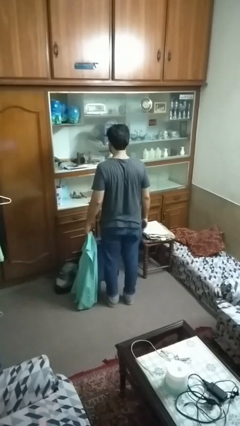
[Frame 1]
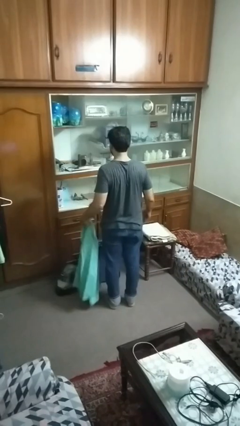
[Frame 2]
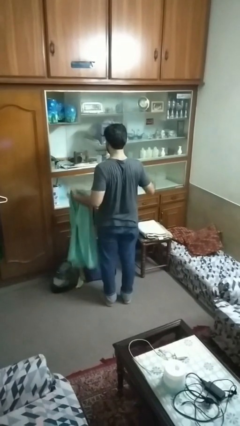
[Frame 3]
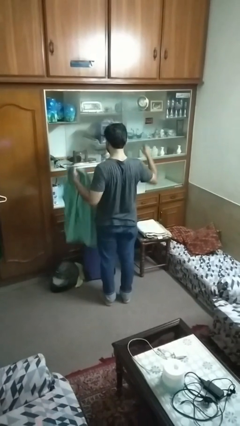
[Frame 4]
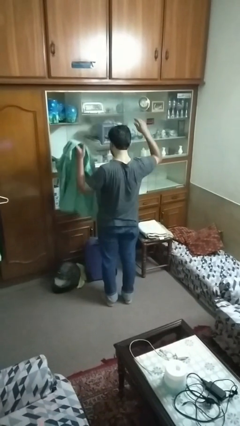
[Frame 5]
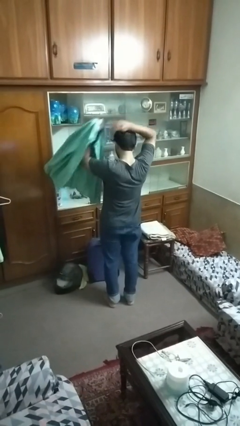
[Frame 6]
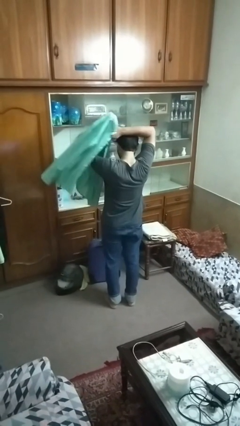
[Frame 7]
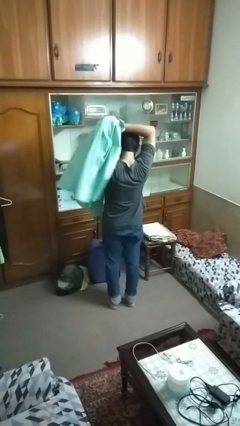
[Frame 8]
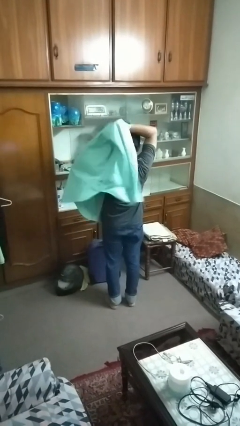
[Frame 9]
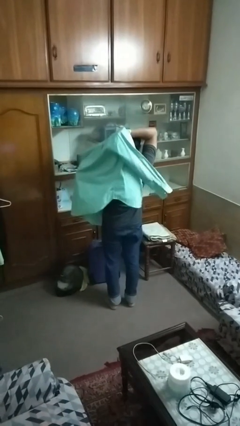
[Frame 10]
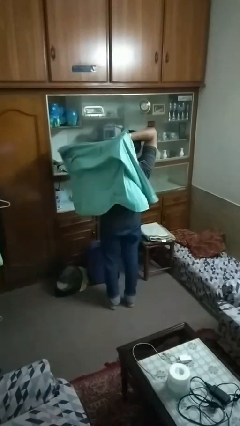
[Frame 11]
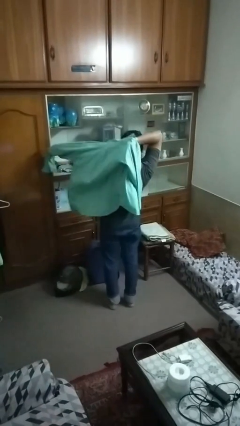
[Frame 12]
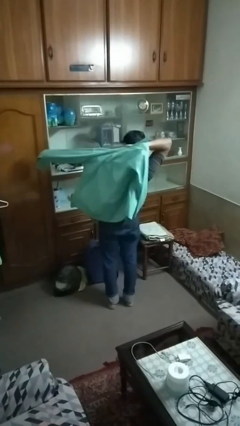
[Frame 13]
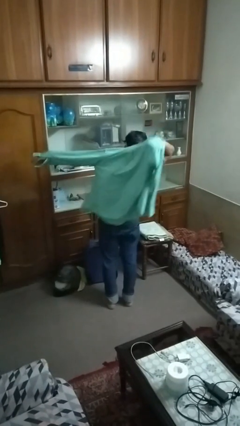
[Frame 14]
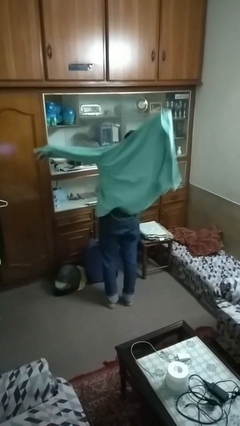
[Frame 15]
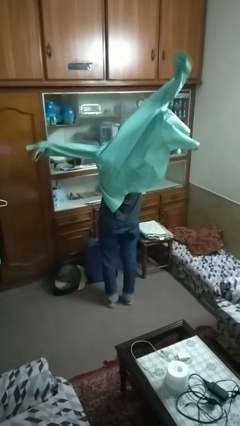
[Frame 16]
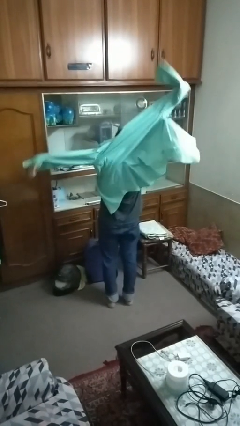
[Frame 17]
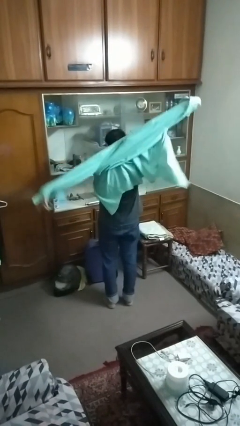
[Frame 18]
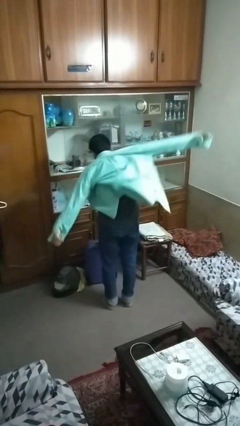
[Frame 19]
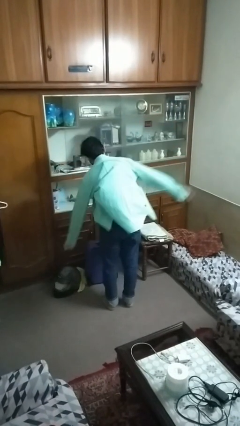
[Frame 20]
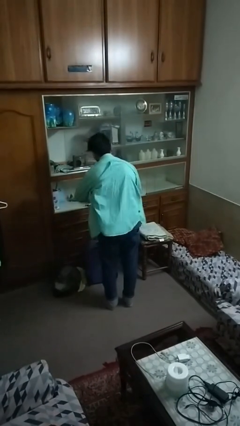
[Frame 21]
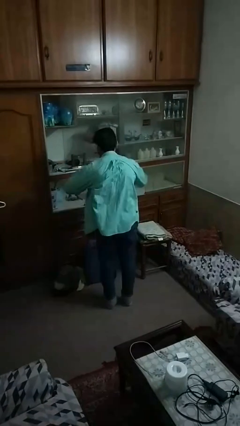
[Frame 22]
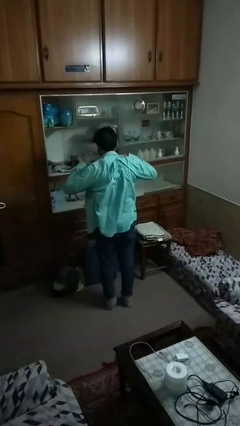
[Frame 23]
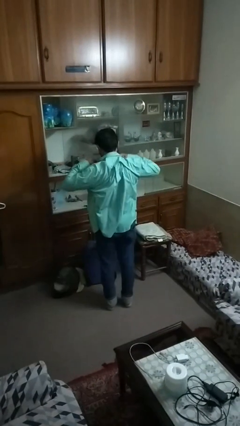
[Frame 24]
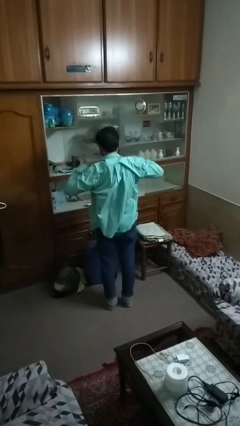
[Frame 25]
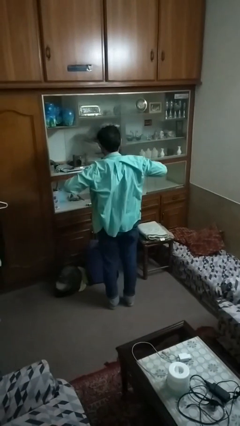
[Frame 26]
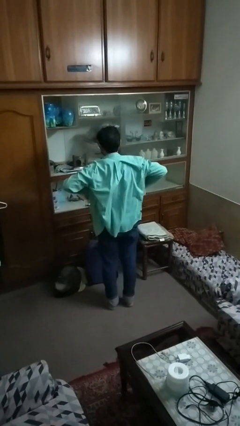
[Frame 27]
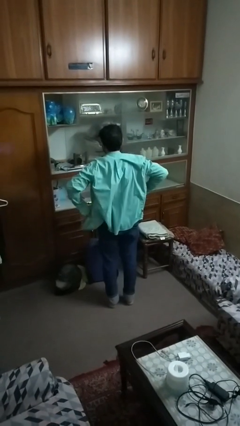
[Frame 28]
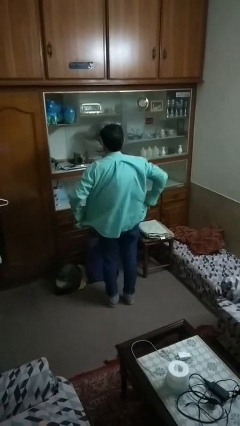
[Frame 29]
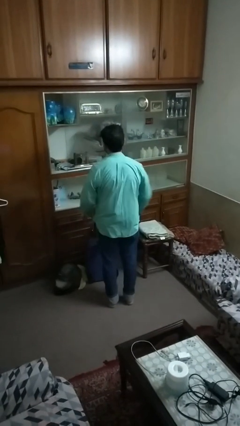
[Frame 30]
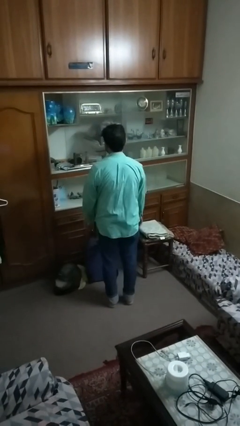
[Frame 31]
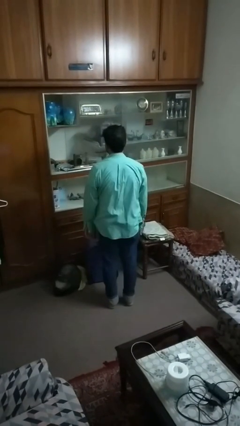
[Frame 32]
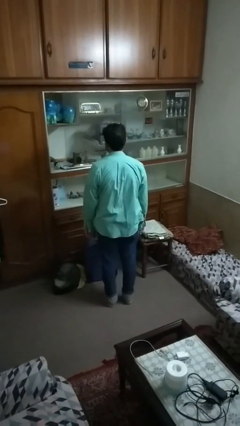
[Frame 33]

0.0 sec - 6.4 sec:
person puts on shirt

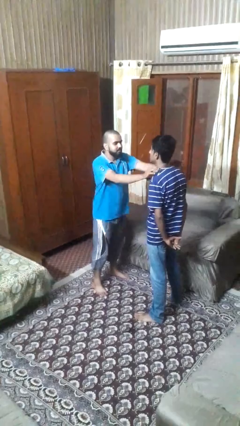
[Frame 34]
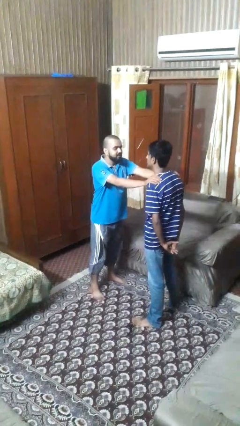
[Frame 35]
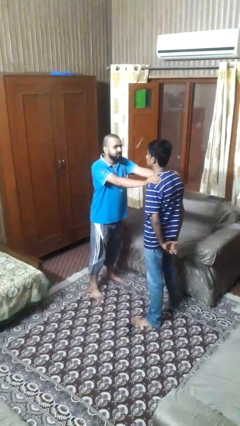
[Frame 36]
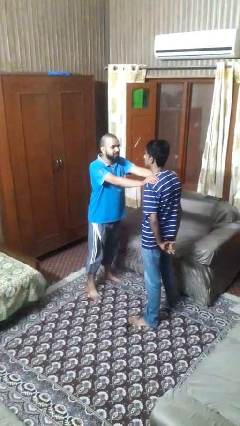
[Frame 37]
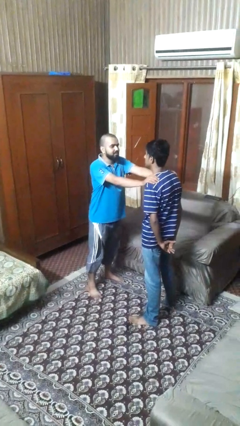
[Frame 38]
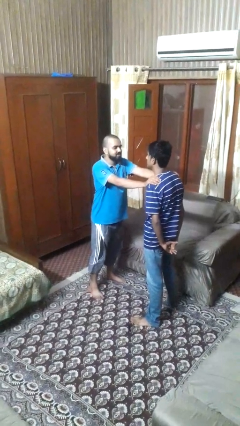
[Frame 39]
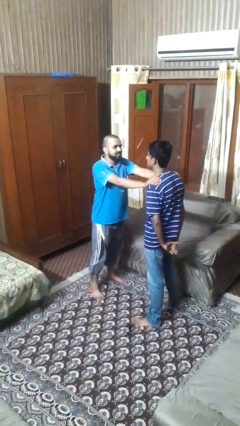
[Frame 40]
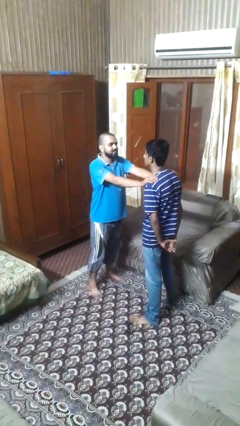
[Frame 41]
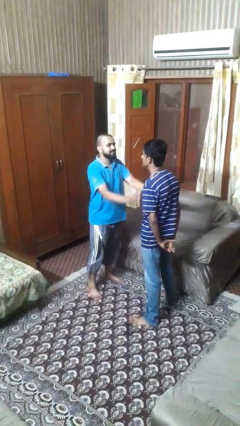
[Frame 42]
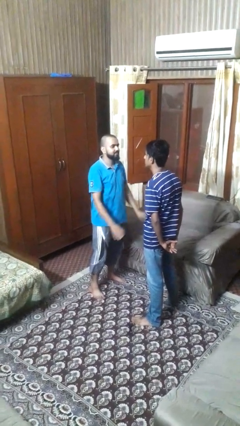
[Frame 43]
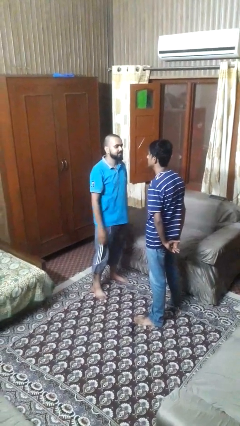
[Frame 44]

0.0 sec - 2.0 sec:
person pounds shoulders of person

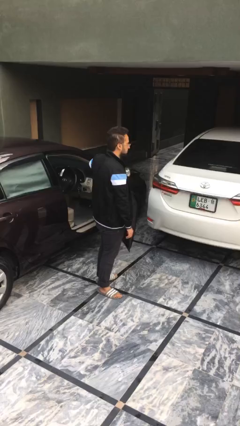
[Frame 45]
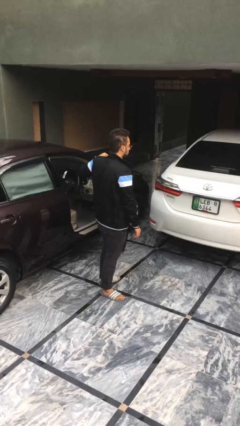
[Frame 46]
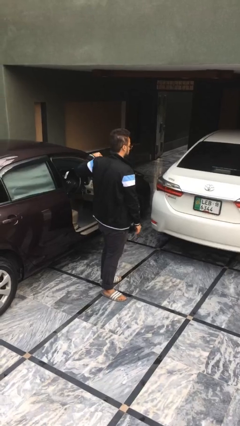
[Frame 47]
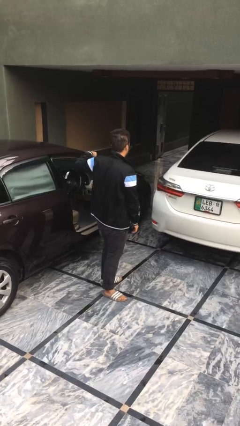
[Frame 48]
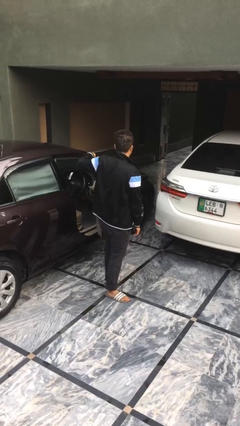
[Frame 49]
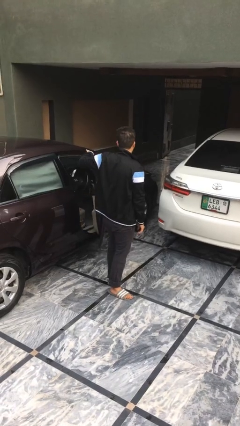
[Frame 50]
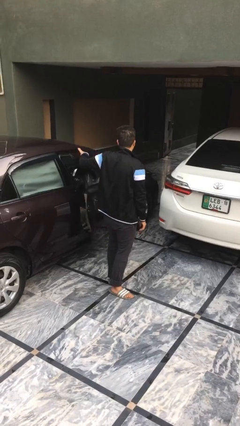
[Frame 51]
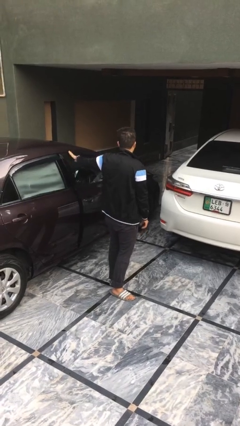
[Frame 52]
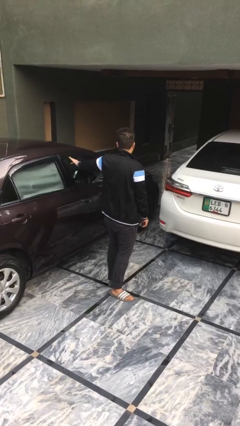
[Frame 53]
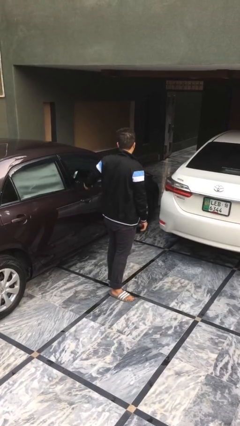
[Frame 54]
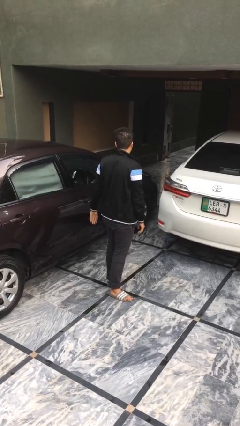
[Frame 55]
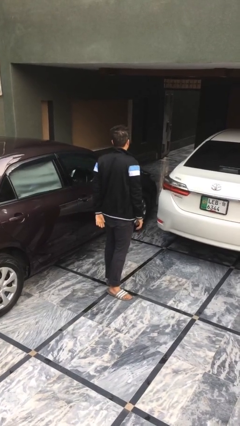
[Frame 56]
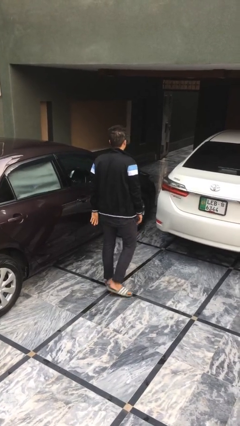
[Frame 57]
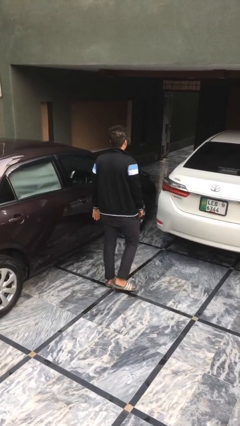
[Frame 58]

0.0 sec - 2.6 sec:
person closes car door

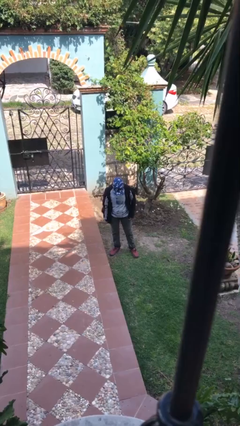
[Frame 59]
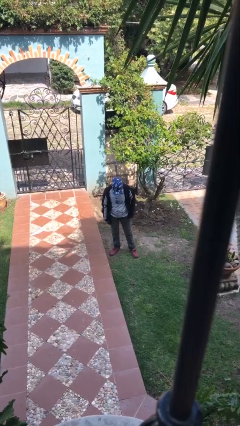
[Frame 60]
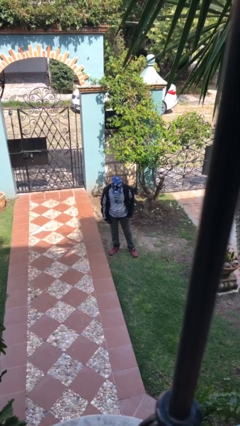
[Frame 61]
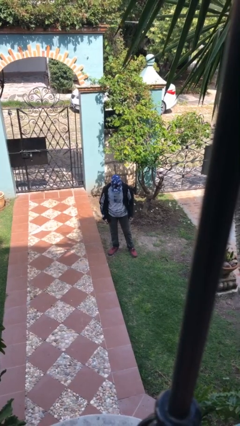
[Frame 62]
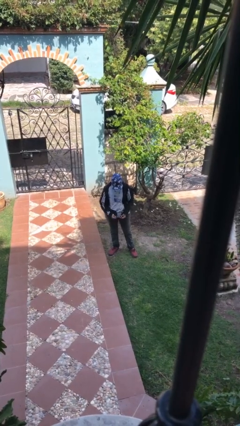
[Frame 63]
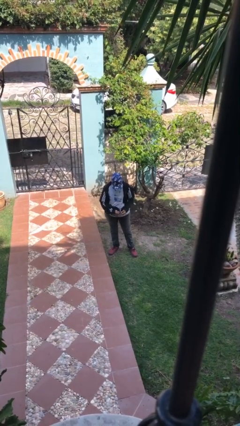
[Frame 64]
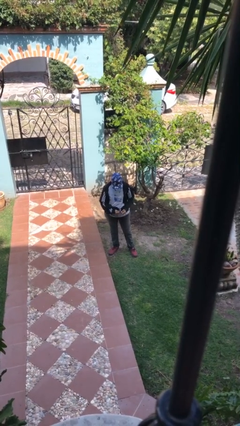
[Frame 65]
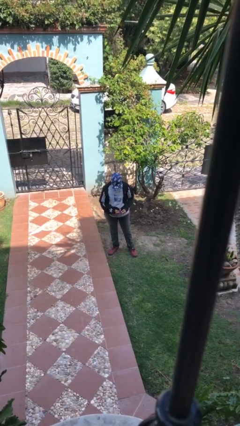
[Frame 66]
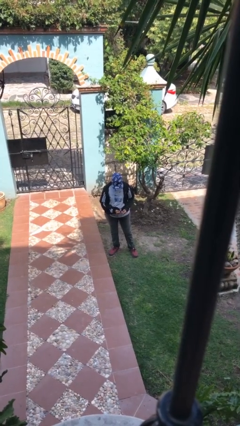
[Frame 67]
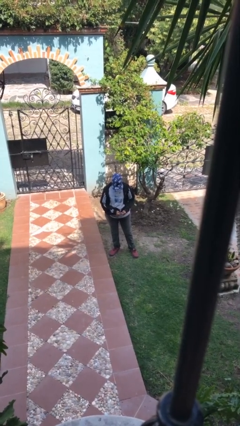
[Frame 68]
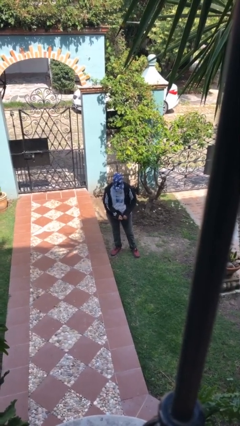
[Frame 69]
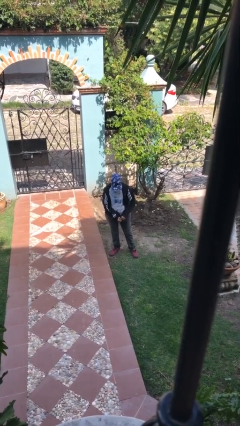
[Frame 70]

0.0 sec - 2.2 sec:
person zips up jacket

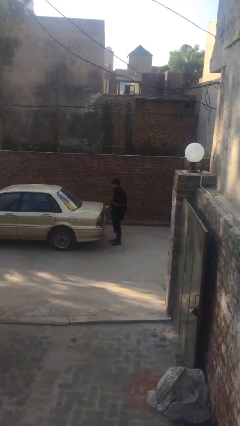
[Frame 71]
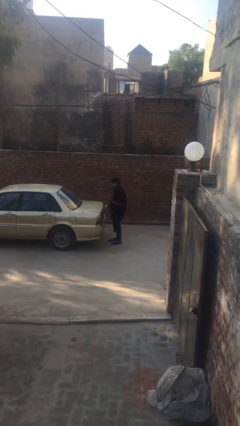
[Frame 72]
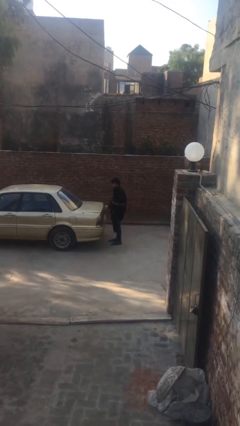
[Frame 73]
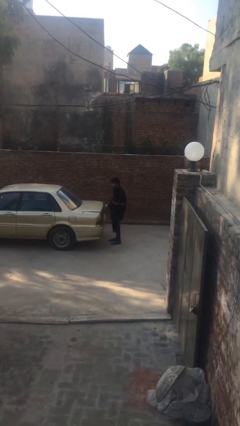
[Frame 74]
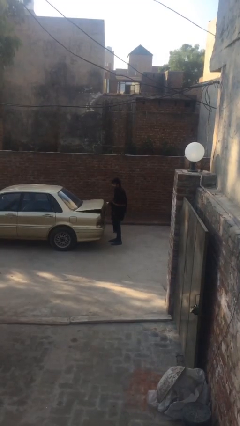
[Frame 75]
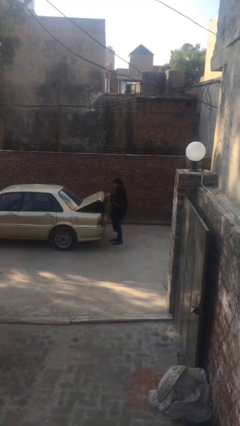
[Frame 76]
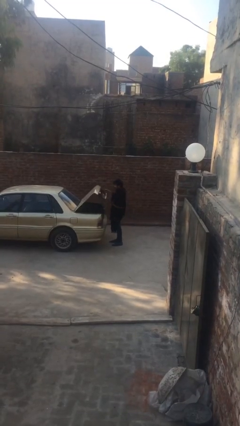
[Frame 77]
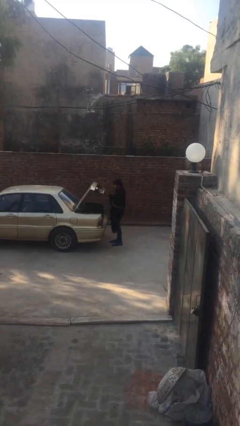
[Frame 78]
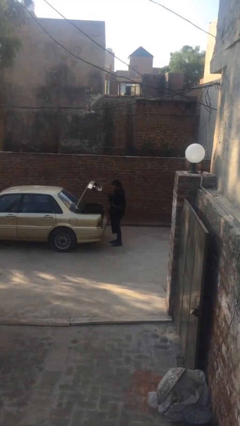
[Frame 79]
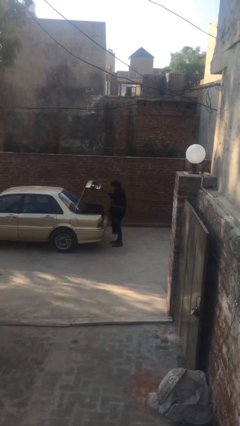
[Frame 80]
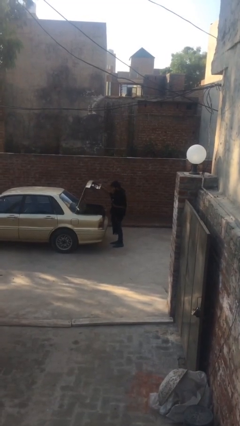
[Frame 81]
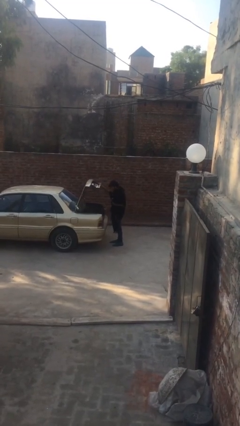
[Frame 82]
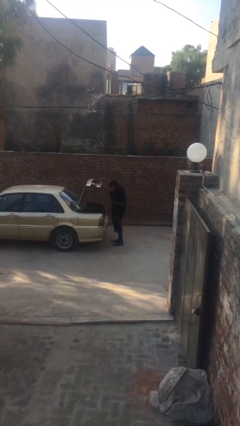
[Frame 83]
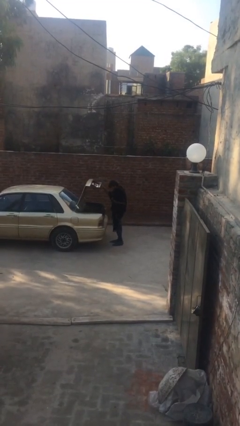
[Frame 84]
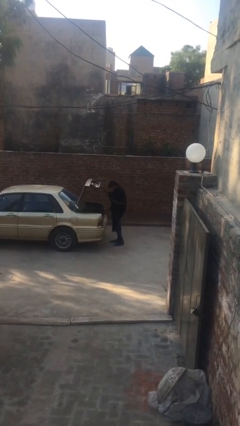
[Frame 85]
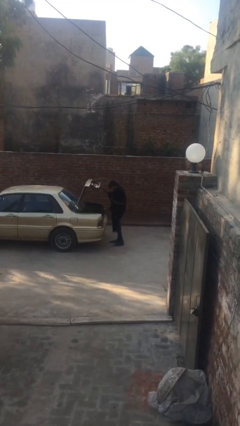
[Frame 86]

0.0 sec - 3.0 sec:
person opens car trunk

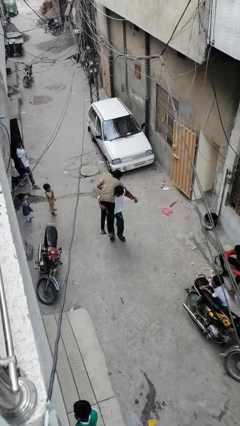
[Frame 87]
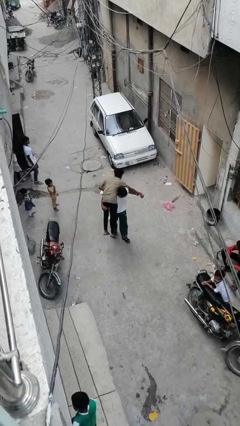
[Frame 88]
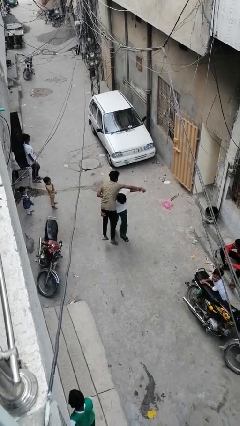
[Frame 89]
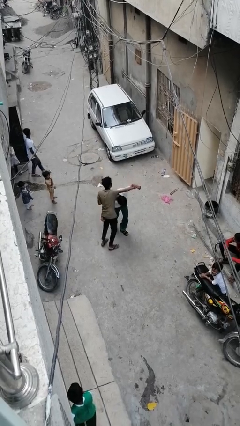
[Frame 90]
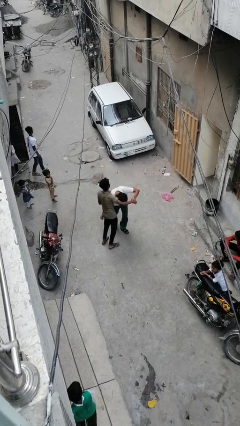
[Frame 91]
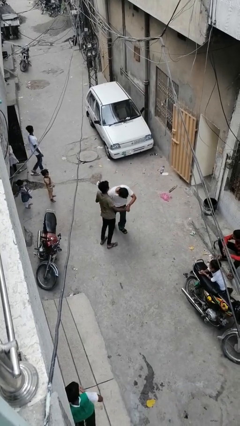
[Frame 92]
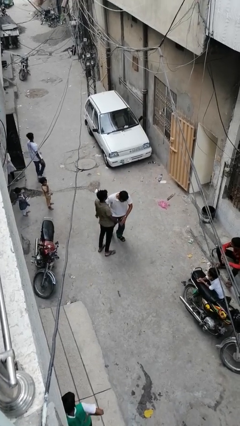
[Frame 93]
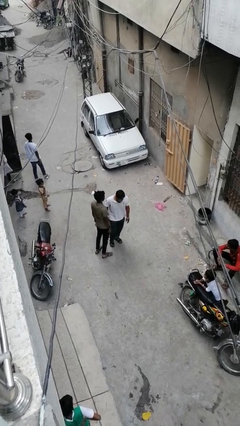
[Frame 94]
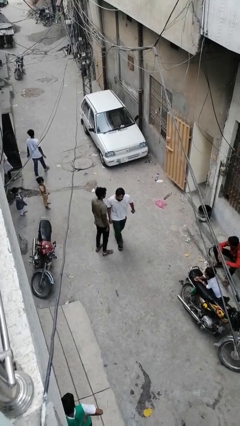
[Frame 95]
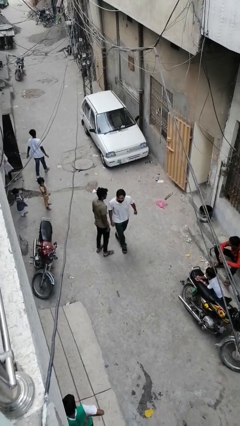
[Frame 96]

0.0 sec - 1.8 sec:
person puts down person
